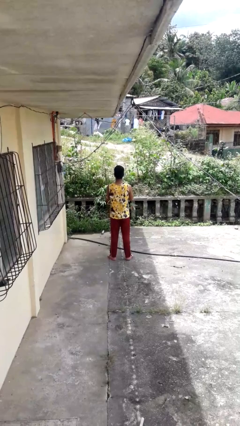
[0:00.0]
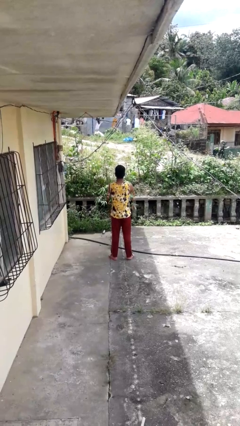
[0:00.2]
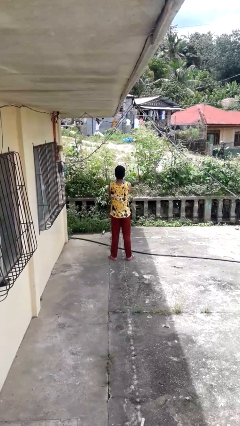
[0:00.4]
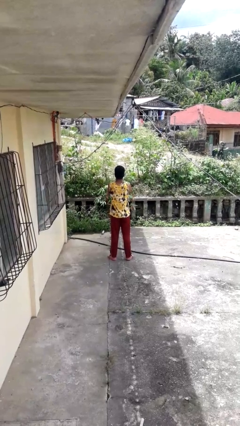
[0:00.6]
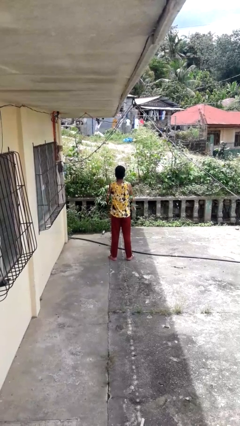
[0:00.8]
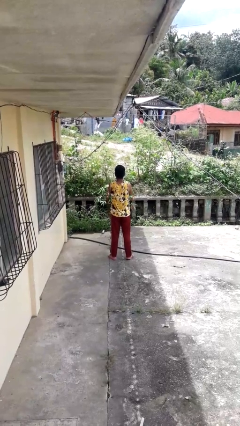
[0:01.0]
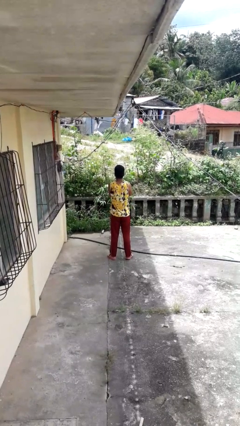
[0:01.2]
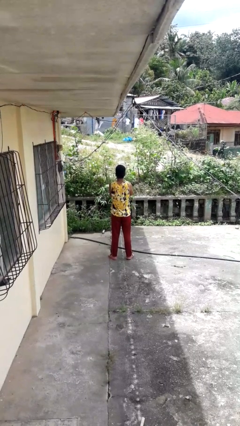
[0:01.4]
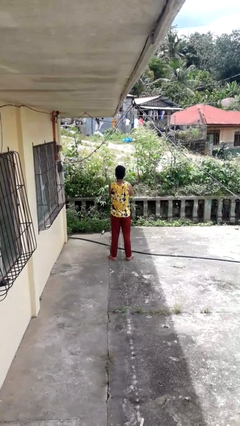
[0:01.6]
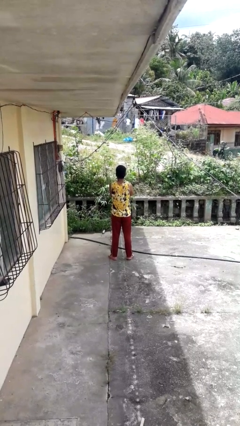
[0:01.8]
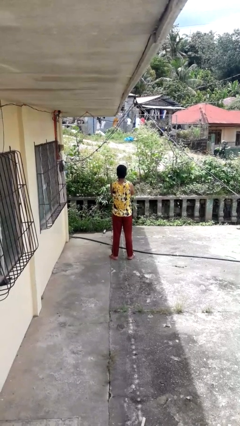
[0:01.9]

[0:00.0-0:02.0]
person crosses arms

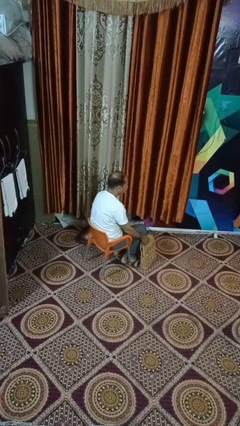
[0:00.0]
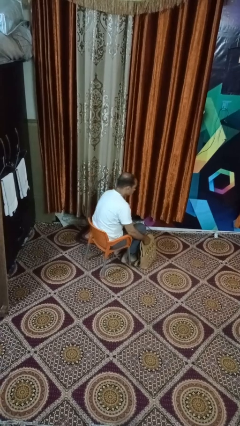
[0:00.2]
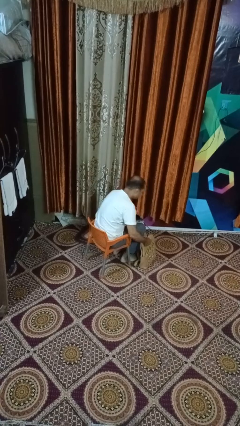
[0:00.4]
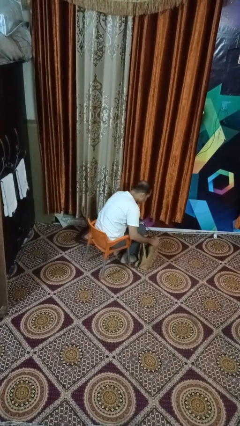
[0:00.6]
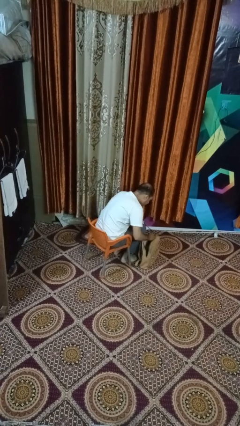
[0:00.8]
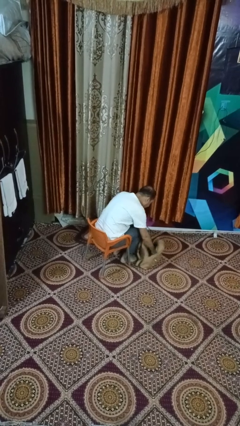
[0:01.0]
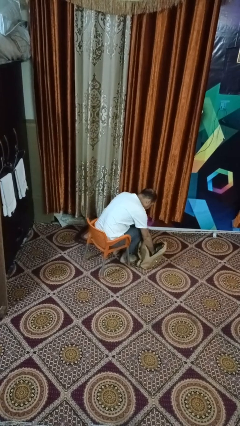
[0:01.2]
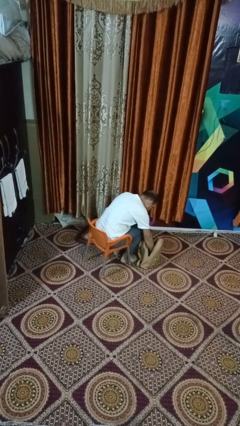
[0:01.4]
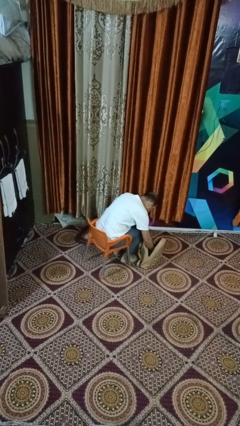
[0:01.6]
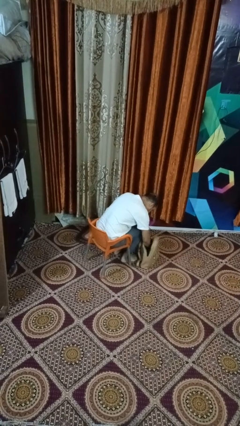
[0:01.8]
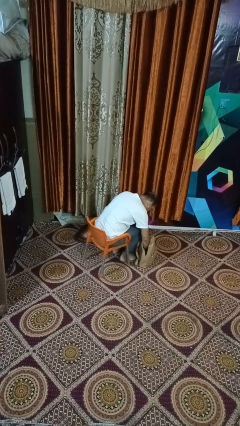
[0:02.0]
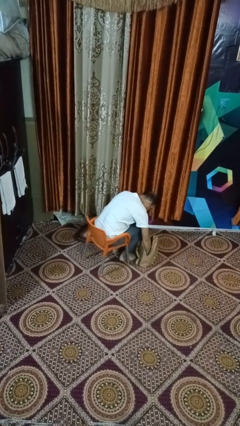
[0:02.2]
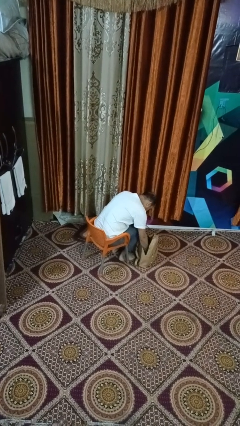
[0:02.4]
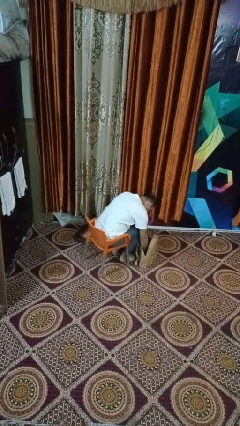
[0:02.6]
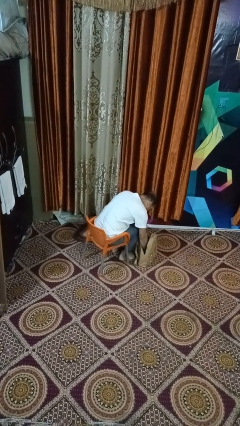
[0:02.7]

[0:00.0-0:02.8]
person searches in purse

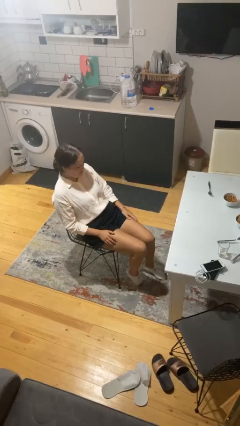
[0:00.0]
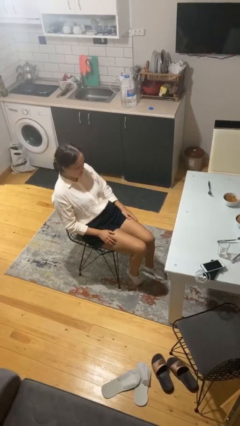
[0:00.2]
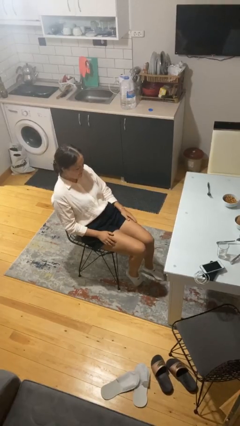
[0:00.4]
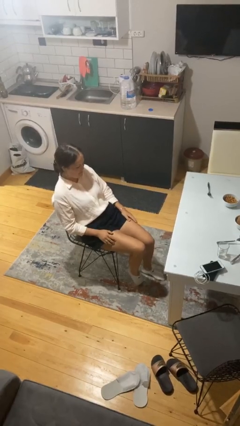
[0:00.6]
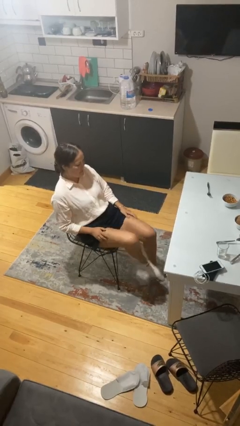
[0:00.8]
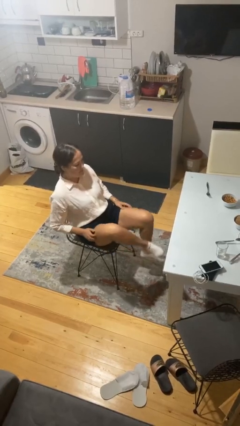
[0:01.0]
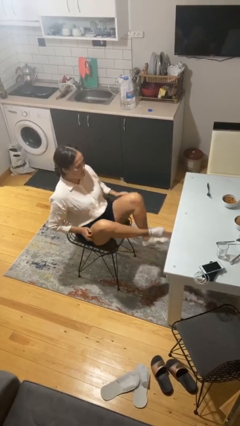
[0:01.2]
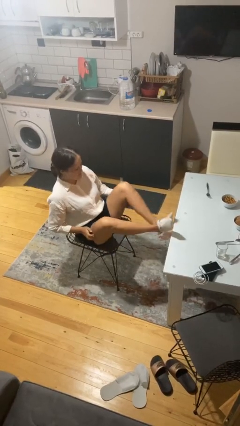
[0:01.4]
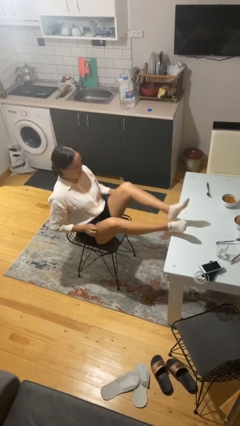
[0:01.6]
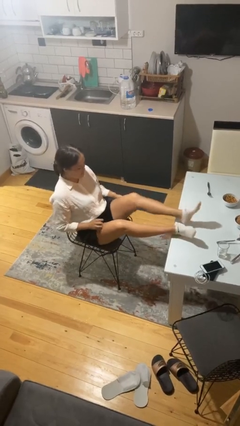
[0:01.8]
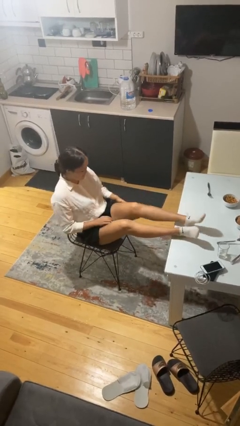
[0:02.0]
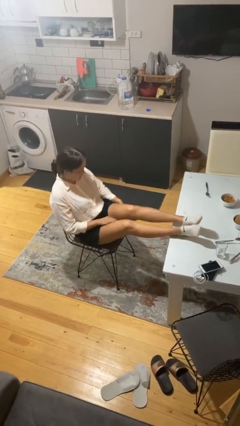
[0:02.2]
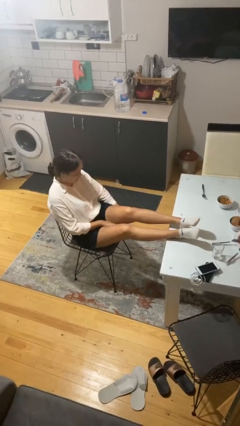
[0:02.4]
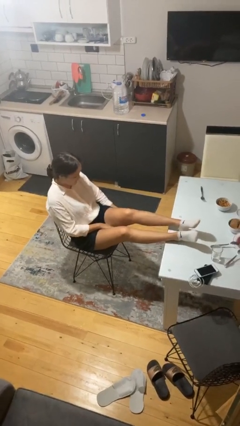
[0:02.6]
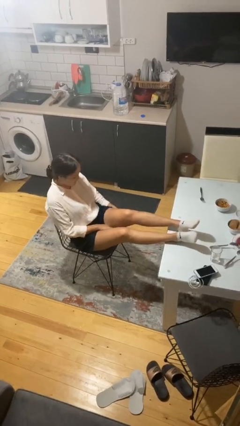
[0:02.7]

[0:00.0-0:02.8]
person puts feet up

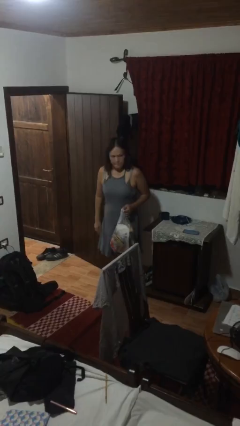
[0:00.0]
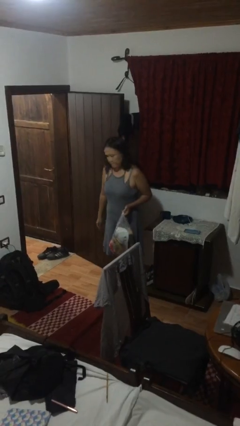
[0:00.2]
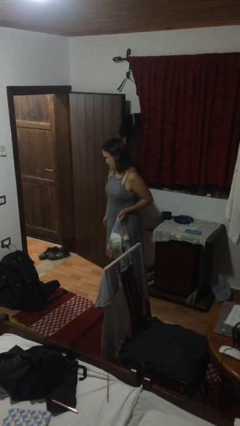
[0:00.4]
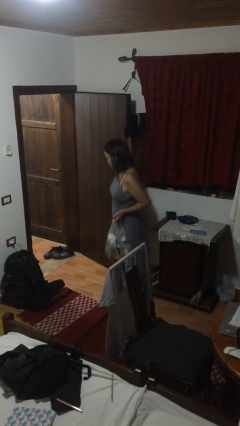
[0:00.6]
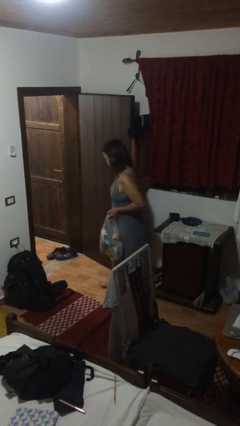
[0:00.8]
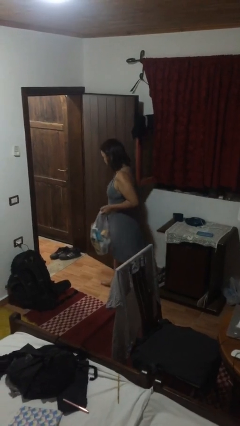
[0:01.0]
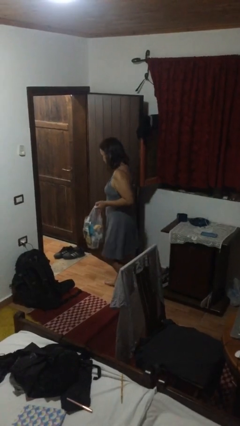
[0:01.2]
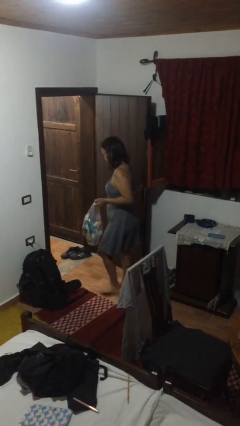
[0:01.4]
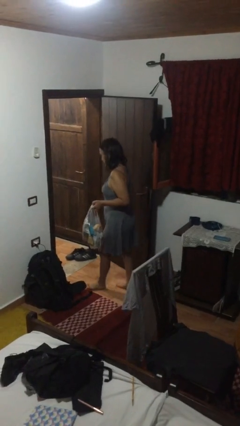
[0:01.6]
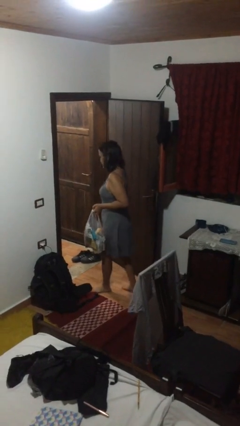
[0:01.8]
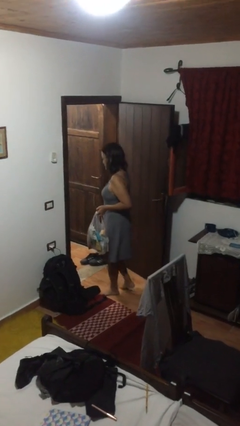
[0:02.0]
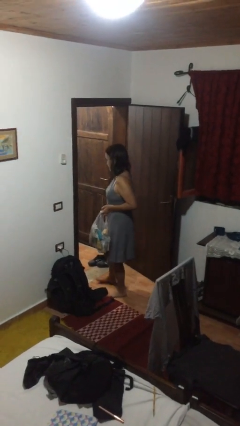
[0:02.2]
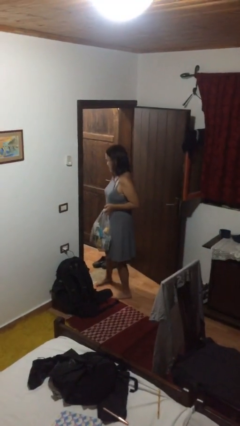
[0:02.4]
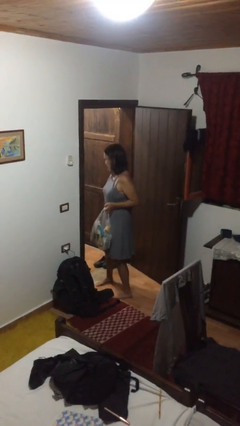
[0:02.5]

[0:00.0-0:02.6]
person carries groceries

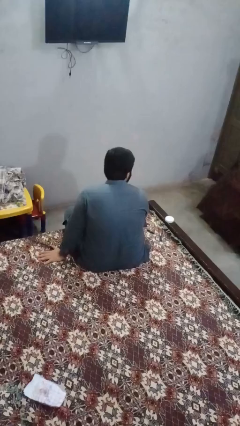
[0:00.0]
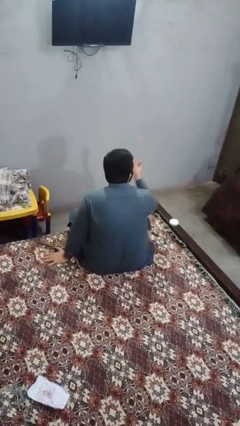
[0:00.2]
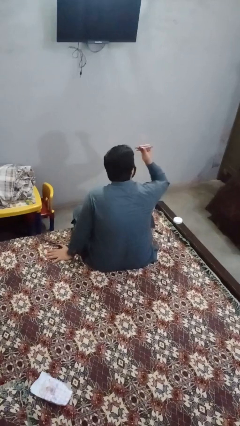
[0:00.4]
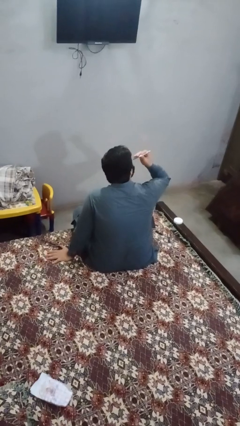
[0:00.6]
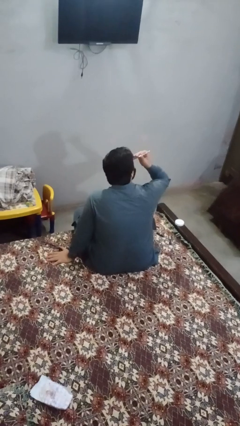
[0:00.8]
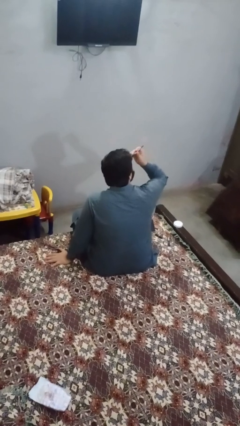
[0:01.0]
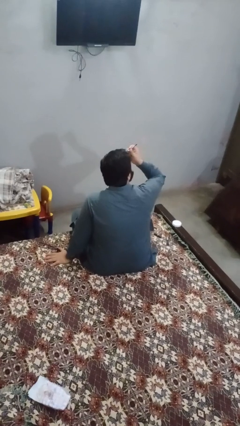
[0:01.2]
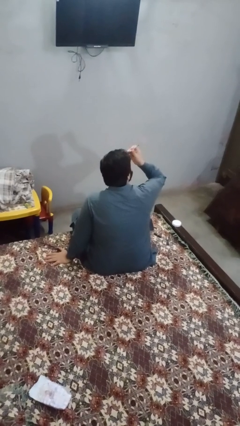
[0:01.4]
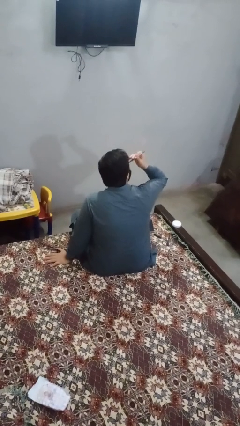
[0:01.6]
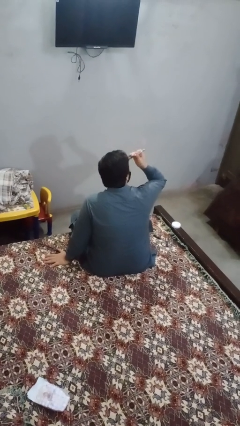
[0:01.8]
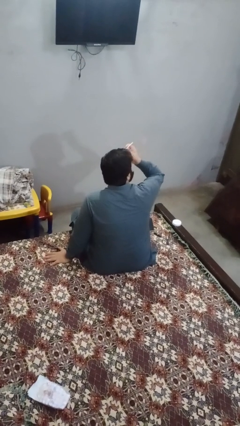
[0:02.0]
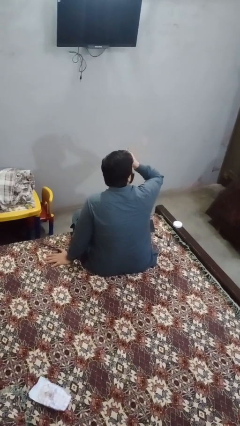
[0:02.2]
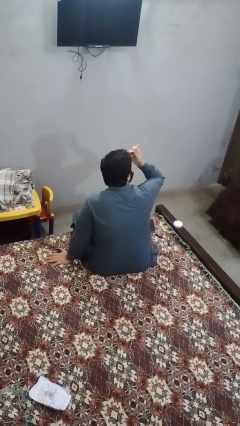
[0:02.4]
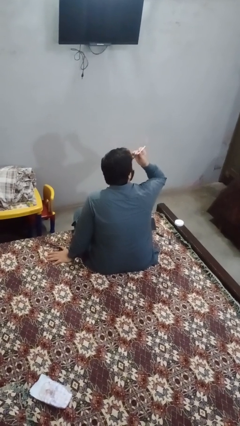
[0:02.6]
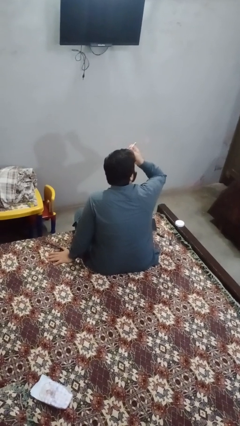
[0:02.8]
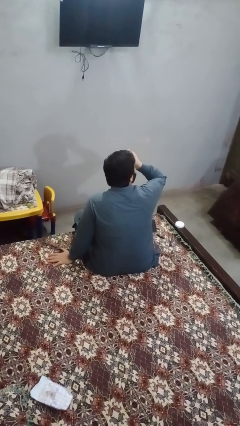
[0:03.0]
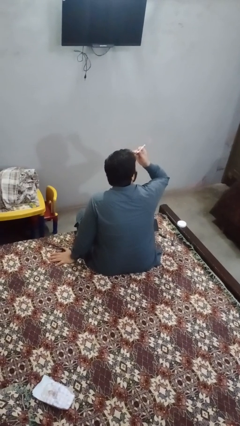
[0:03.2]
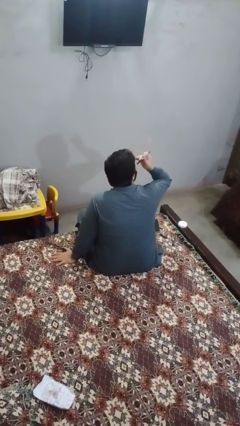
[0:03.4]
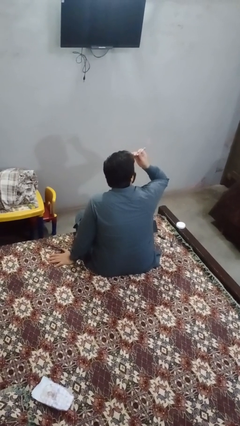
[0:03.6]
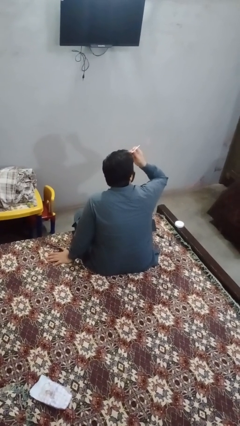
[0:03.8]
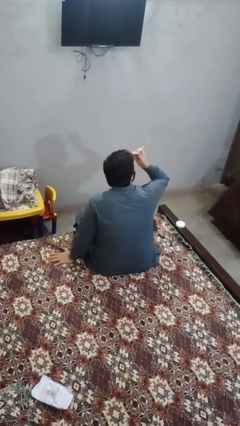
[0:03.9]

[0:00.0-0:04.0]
person applies eye makeup

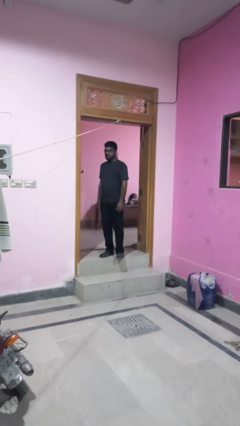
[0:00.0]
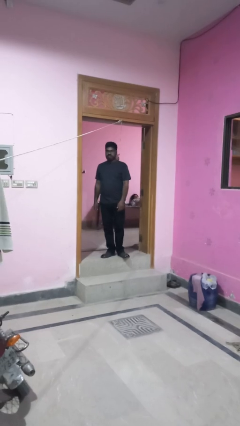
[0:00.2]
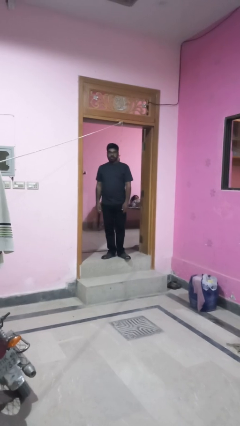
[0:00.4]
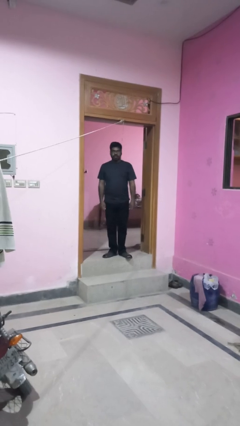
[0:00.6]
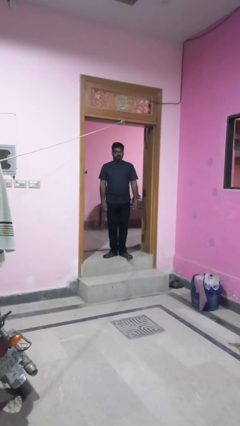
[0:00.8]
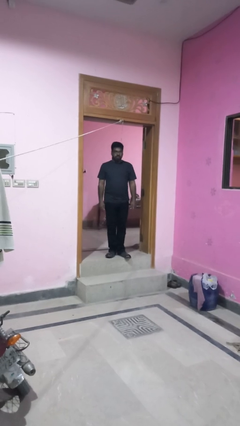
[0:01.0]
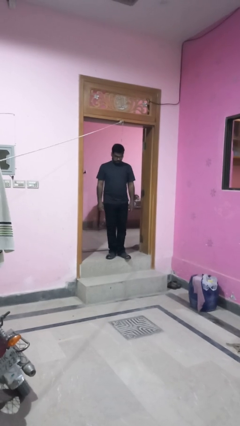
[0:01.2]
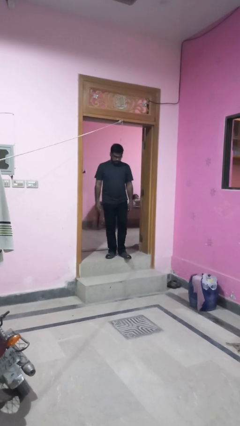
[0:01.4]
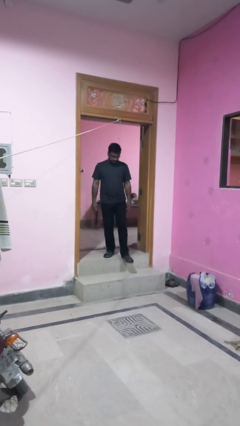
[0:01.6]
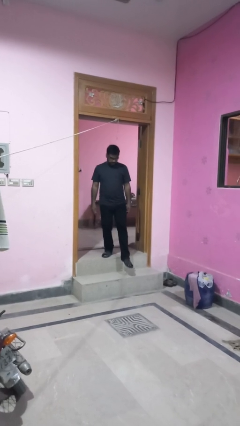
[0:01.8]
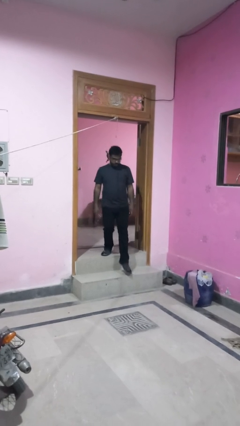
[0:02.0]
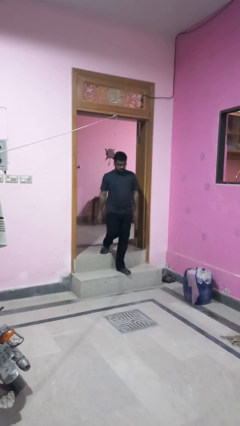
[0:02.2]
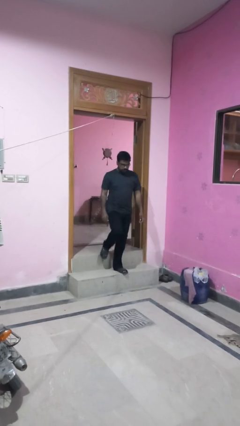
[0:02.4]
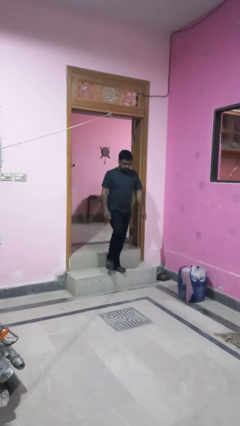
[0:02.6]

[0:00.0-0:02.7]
person takes off necklace
